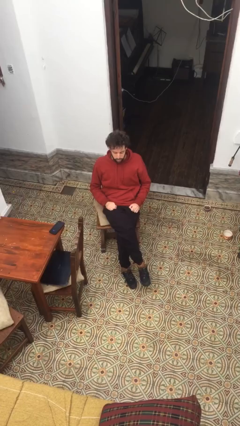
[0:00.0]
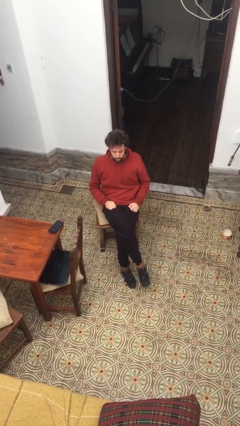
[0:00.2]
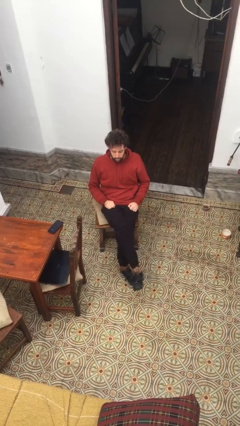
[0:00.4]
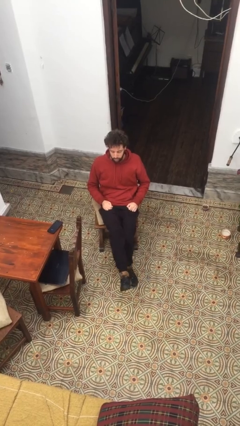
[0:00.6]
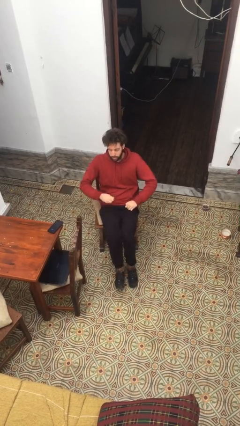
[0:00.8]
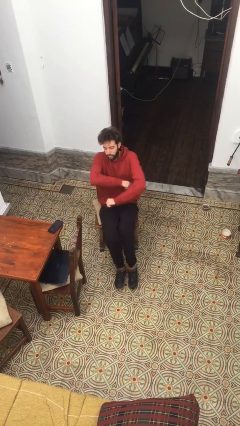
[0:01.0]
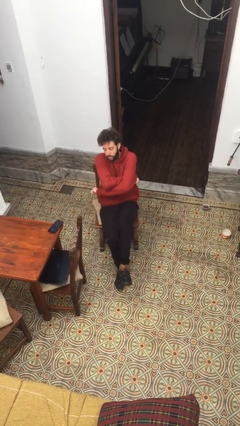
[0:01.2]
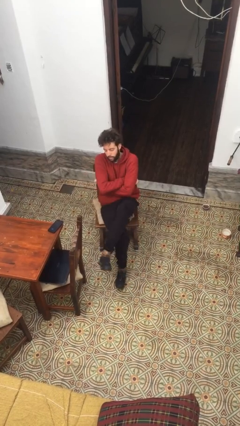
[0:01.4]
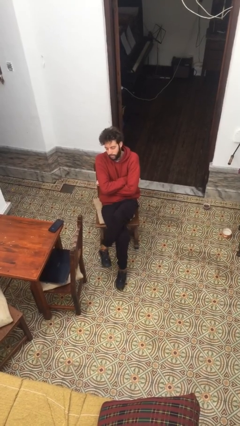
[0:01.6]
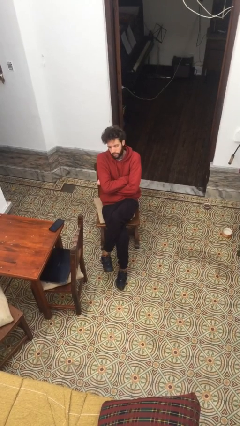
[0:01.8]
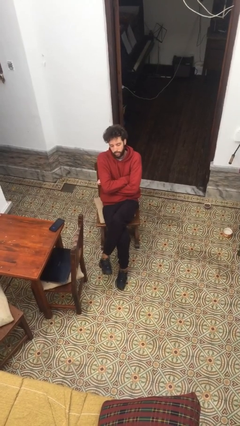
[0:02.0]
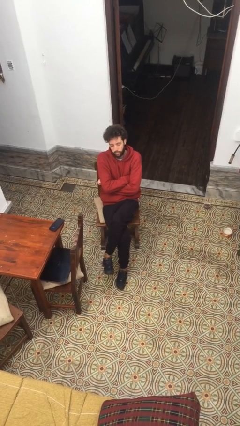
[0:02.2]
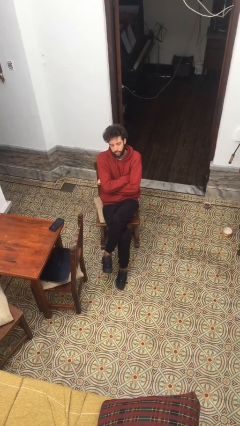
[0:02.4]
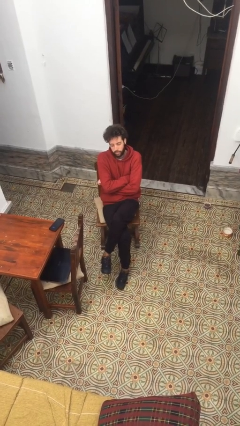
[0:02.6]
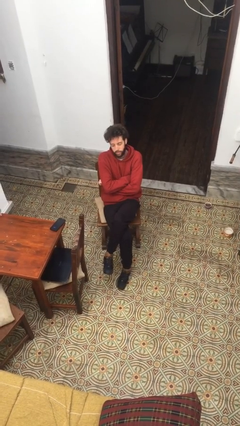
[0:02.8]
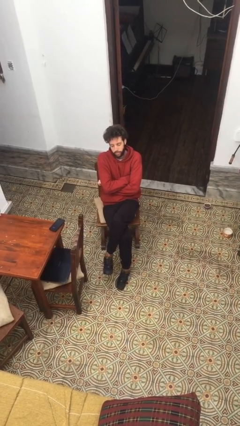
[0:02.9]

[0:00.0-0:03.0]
person crosses arms

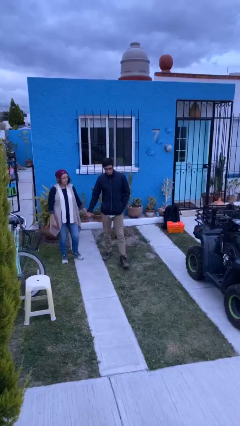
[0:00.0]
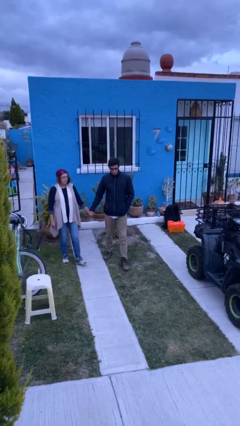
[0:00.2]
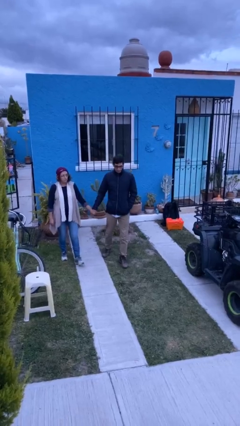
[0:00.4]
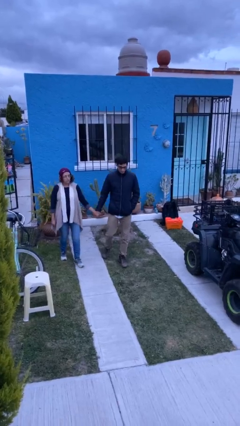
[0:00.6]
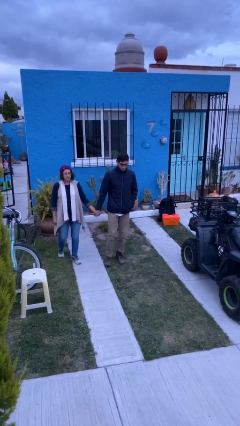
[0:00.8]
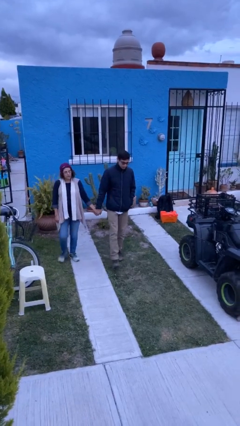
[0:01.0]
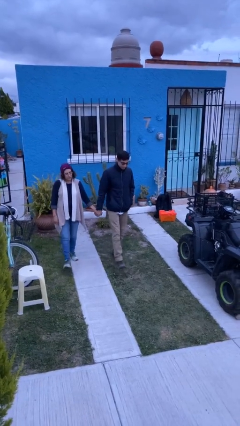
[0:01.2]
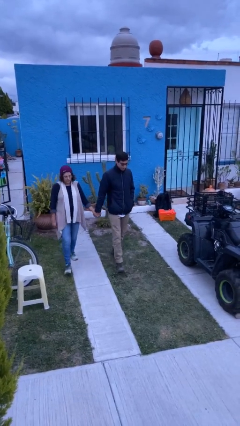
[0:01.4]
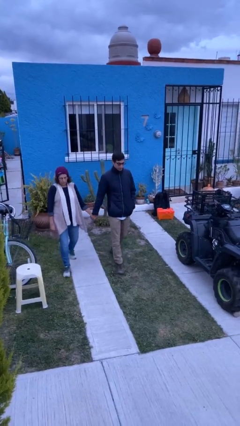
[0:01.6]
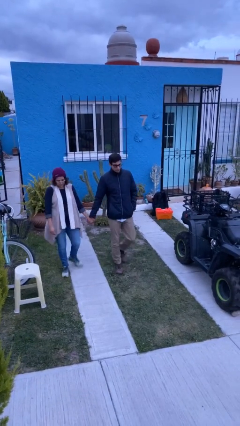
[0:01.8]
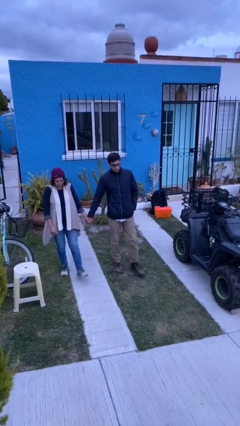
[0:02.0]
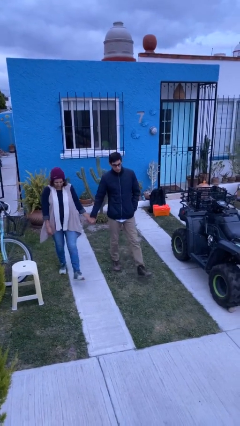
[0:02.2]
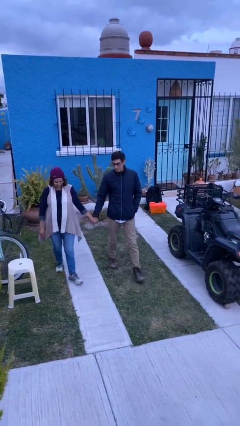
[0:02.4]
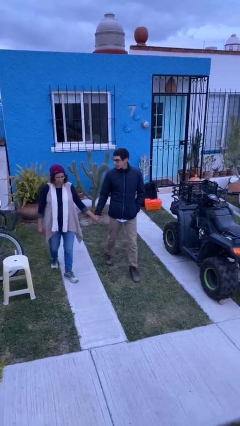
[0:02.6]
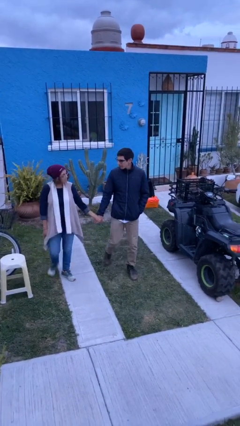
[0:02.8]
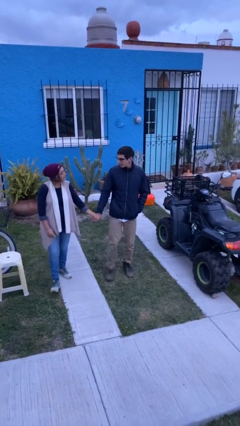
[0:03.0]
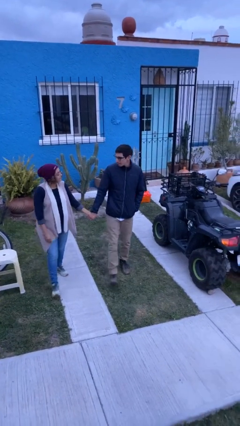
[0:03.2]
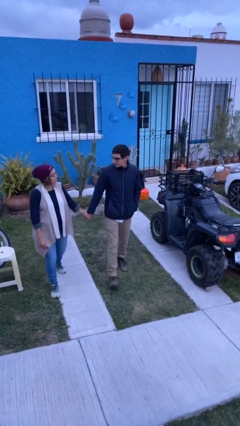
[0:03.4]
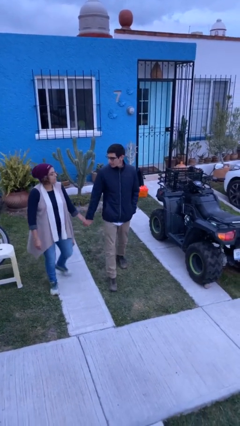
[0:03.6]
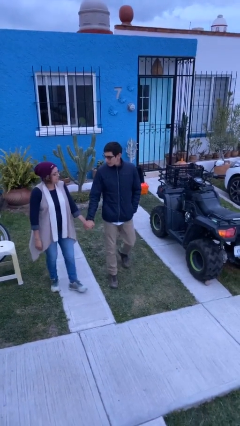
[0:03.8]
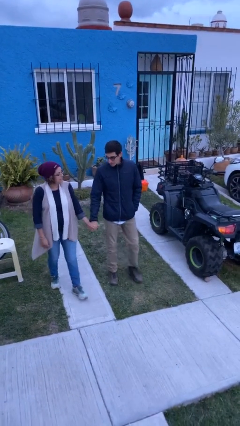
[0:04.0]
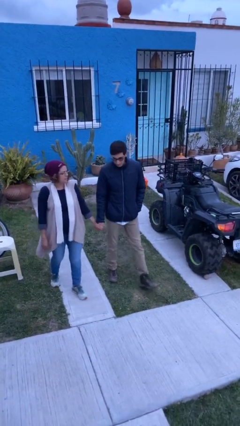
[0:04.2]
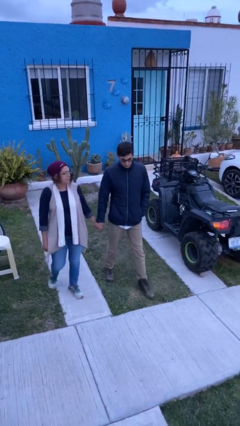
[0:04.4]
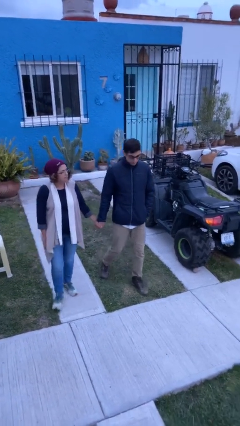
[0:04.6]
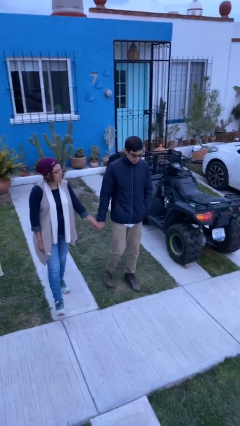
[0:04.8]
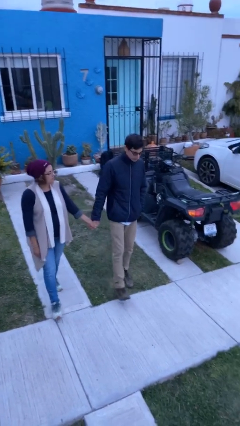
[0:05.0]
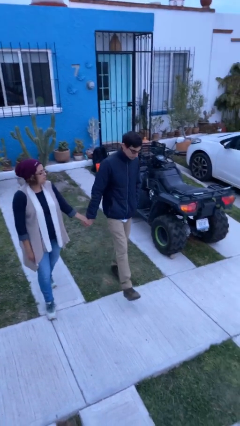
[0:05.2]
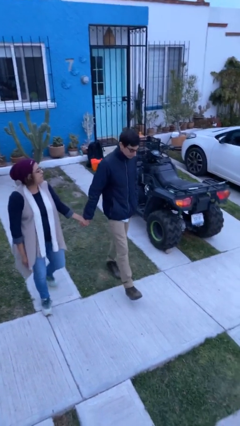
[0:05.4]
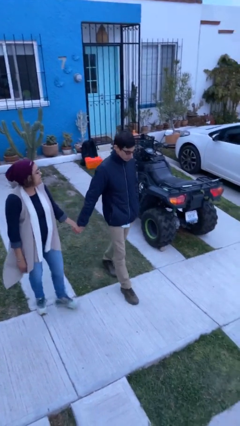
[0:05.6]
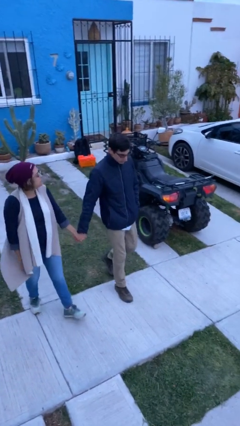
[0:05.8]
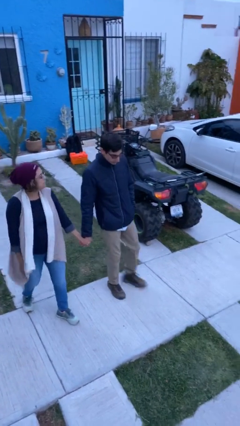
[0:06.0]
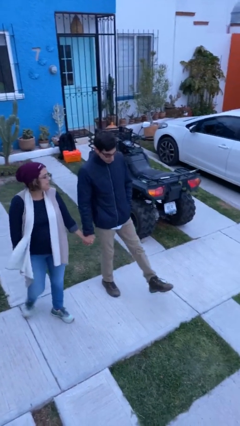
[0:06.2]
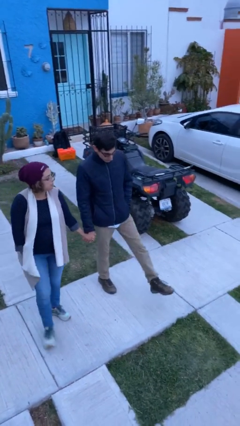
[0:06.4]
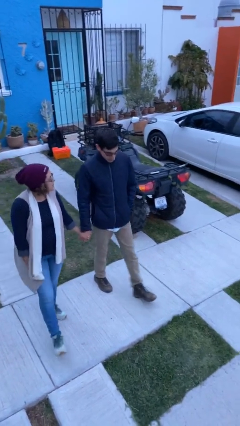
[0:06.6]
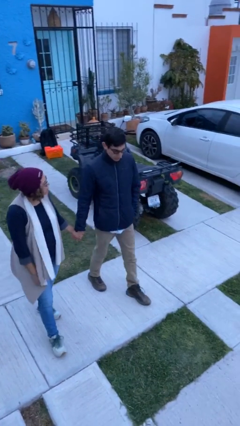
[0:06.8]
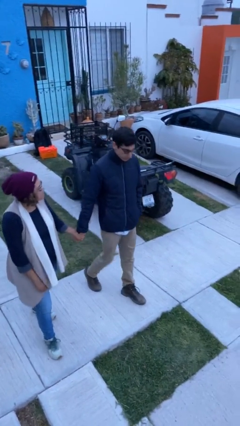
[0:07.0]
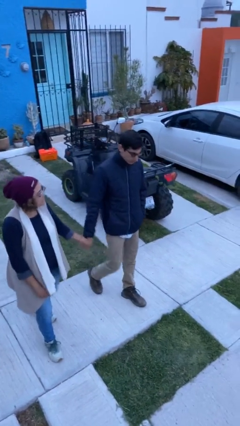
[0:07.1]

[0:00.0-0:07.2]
person holds hand

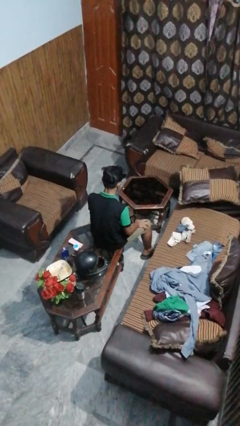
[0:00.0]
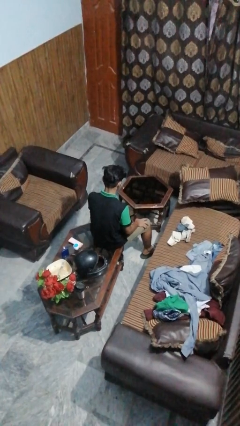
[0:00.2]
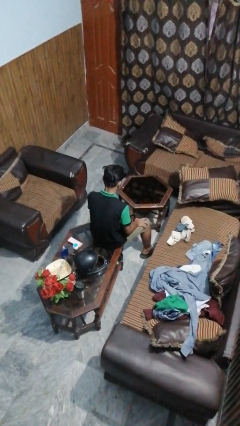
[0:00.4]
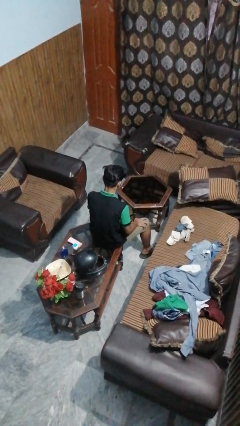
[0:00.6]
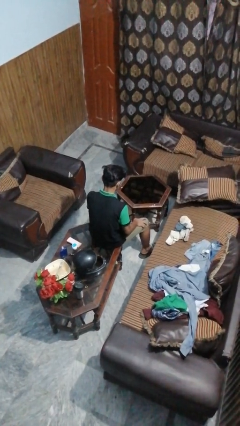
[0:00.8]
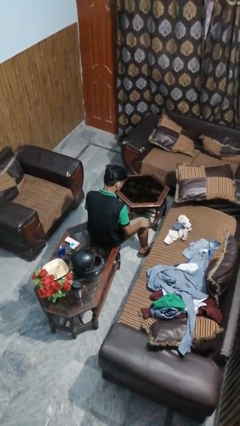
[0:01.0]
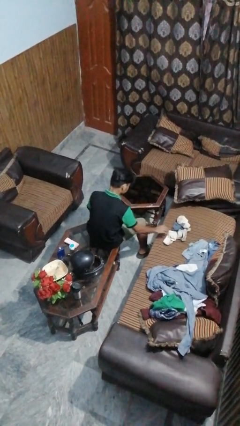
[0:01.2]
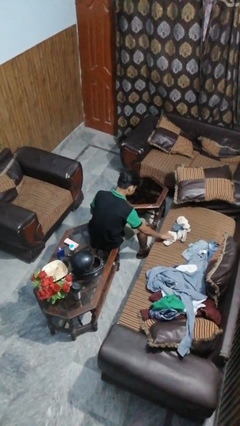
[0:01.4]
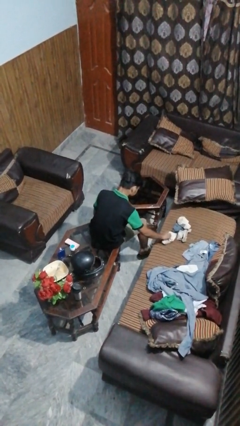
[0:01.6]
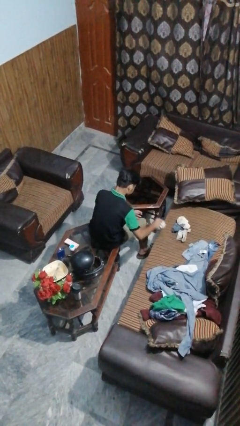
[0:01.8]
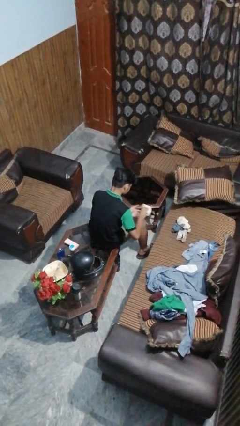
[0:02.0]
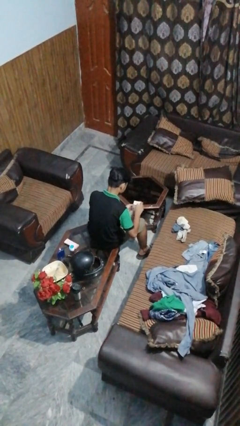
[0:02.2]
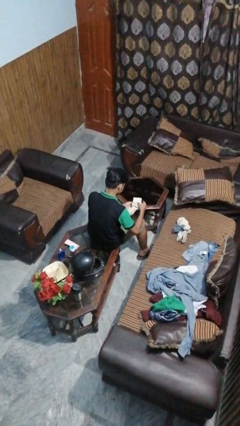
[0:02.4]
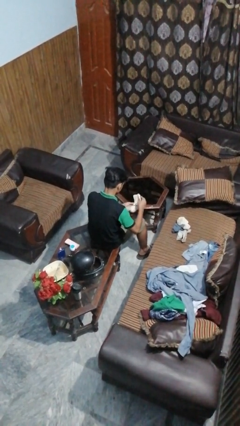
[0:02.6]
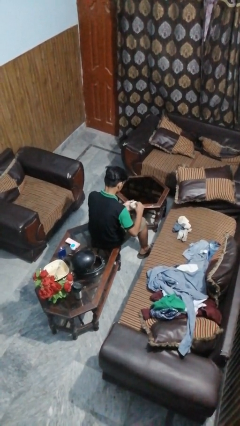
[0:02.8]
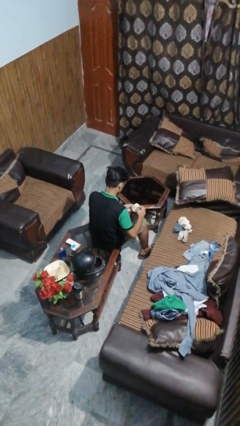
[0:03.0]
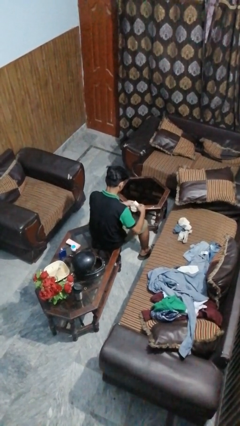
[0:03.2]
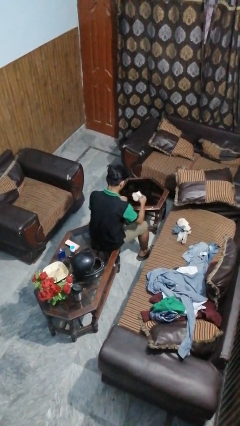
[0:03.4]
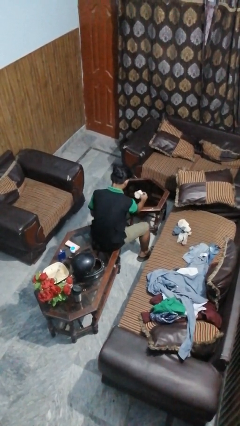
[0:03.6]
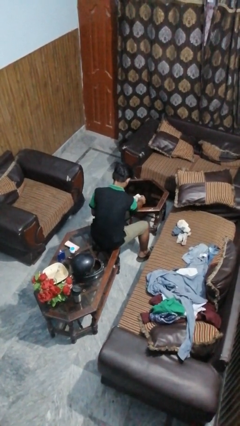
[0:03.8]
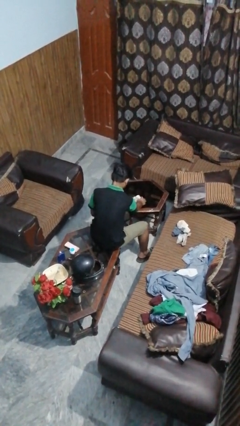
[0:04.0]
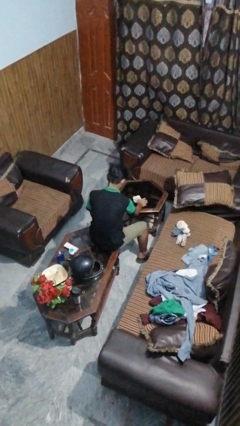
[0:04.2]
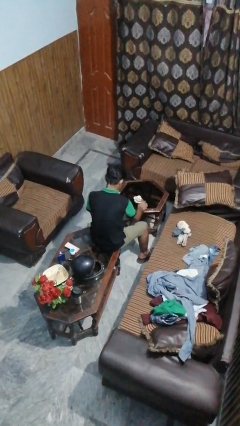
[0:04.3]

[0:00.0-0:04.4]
person folds socks

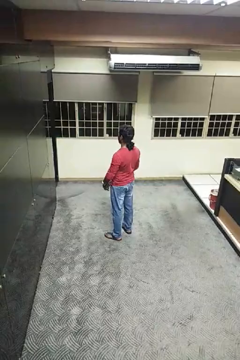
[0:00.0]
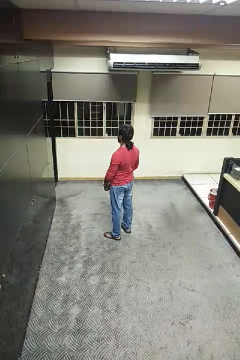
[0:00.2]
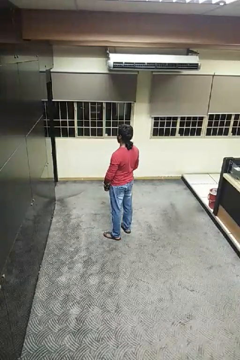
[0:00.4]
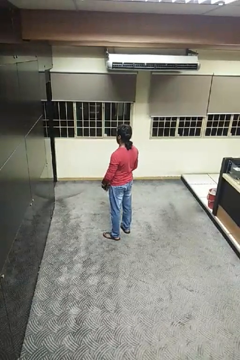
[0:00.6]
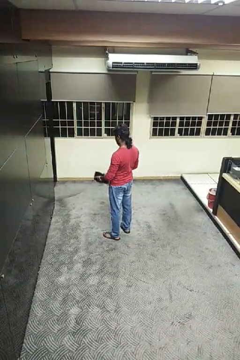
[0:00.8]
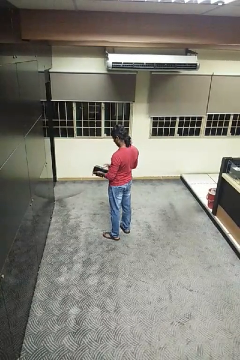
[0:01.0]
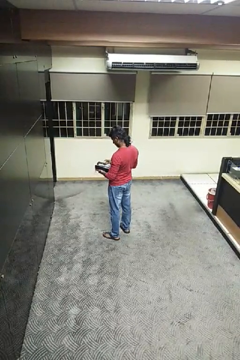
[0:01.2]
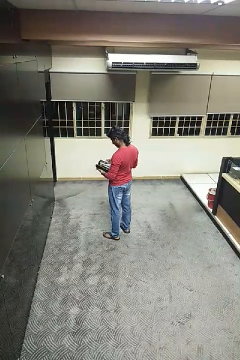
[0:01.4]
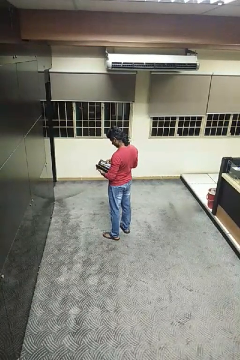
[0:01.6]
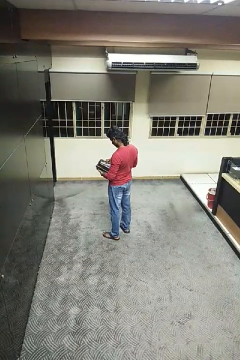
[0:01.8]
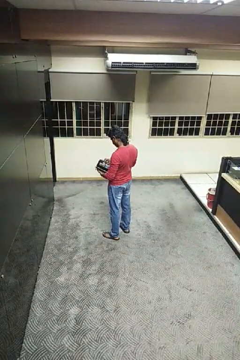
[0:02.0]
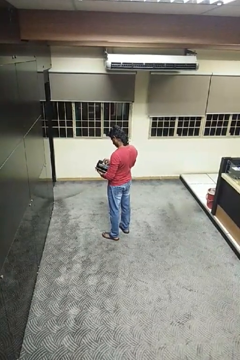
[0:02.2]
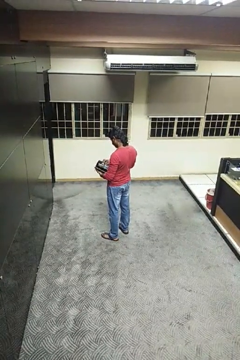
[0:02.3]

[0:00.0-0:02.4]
person searches in purse

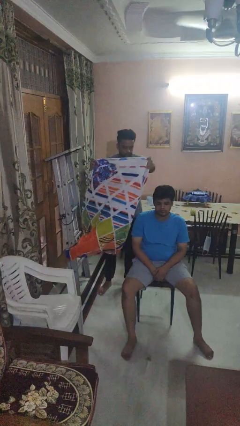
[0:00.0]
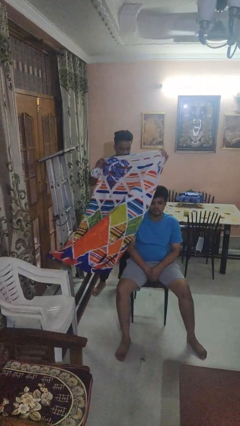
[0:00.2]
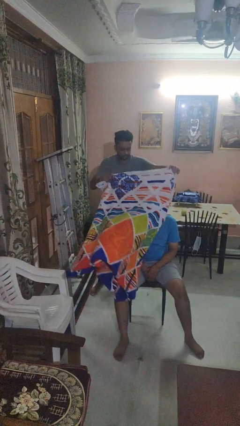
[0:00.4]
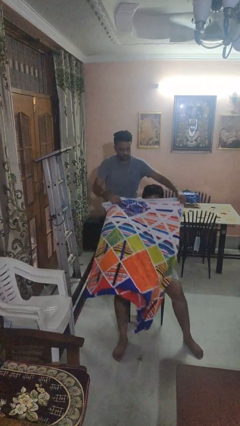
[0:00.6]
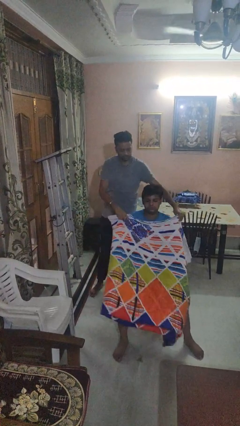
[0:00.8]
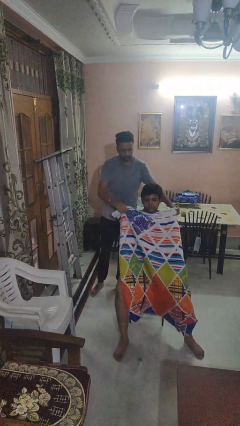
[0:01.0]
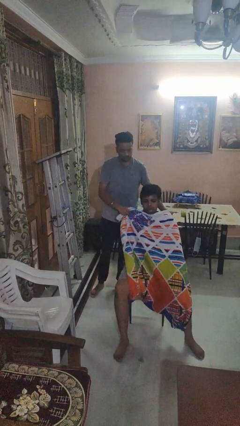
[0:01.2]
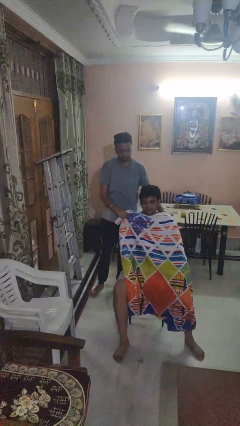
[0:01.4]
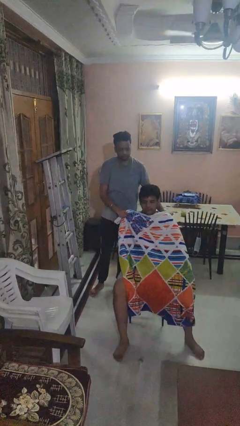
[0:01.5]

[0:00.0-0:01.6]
person covers friend with blanket
